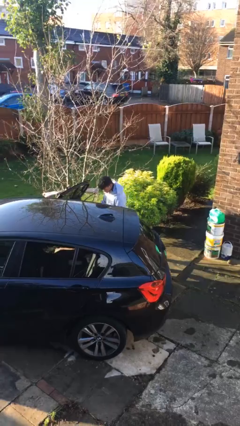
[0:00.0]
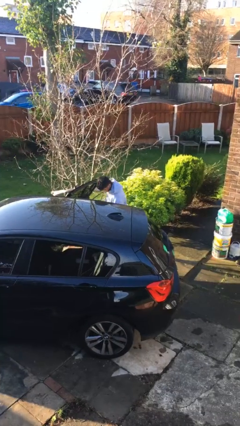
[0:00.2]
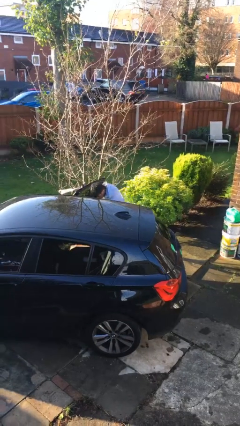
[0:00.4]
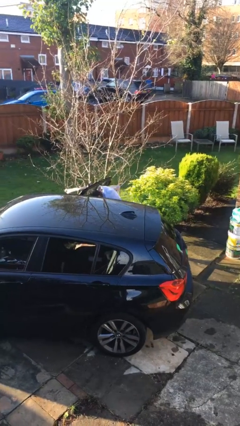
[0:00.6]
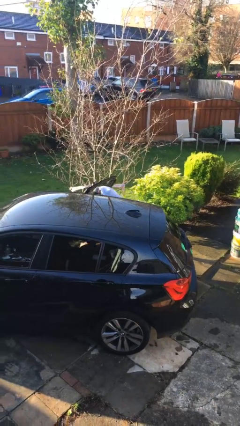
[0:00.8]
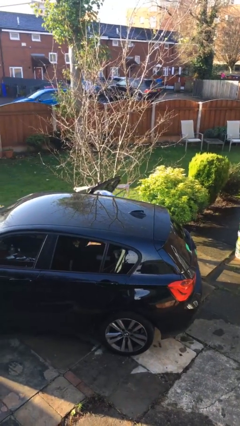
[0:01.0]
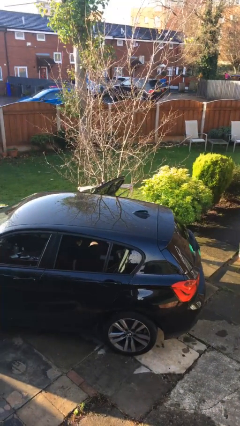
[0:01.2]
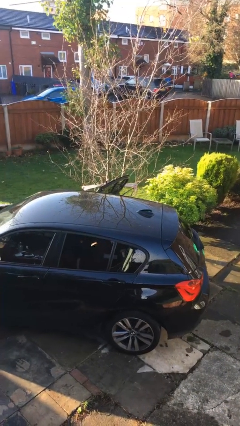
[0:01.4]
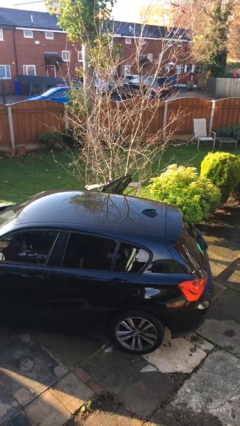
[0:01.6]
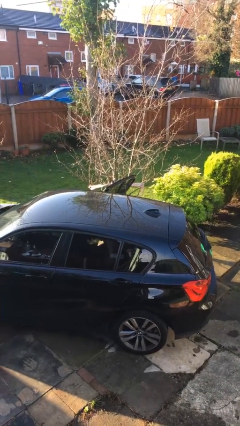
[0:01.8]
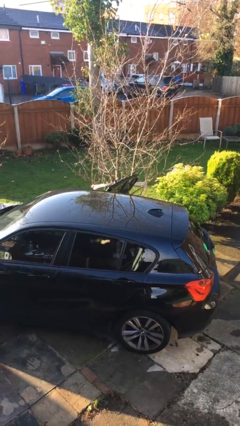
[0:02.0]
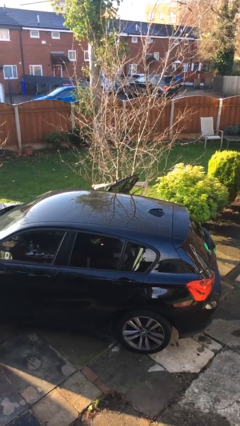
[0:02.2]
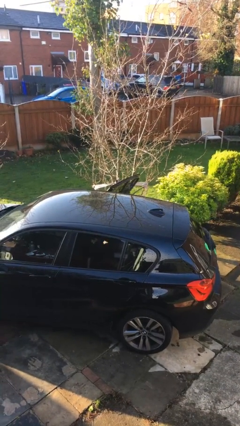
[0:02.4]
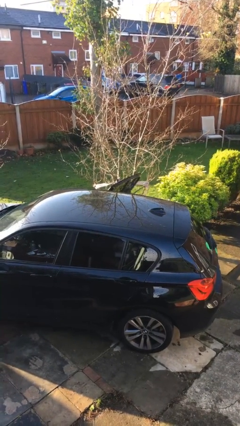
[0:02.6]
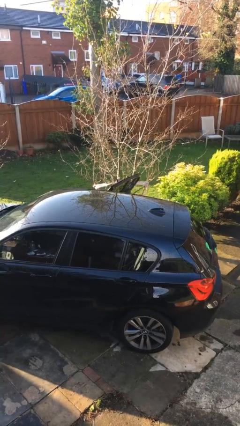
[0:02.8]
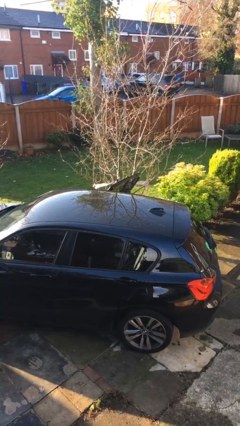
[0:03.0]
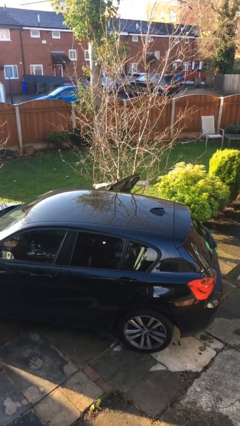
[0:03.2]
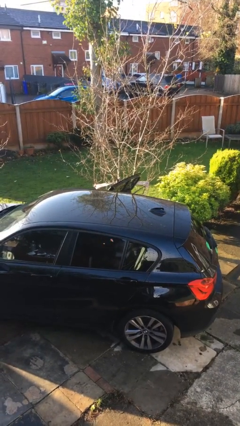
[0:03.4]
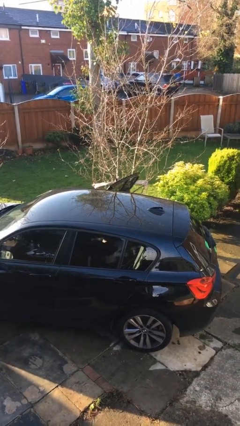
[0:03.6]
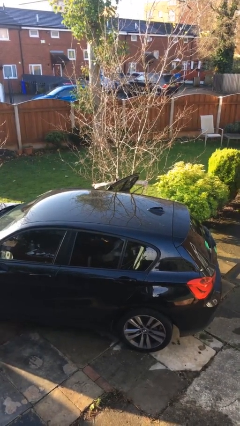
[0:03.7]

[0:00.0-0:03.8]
person enters car

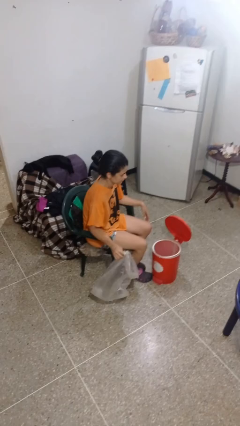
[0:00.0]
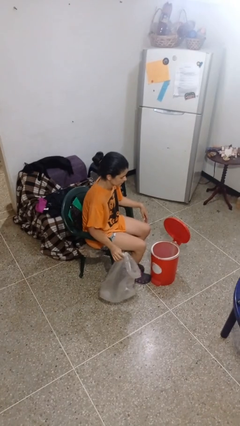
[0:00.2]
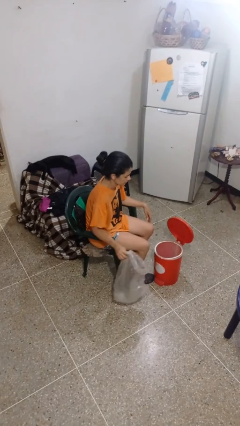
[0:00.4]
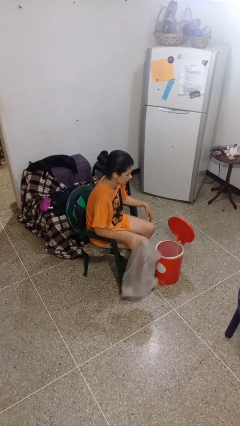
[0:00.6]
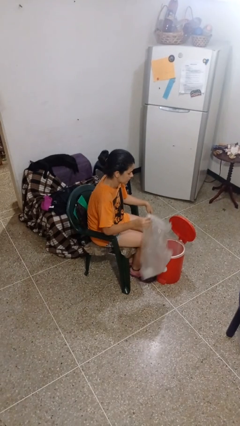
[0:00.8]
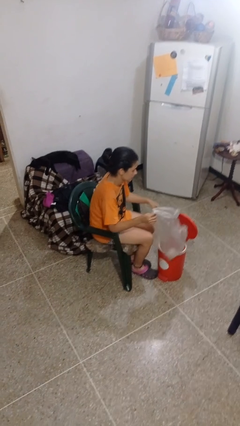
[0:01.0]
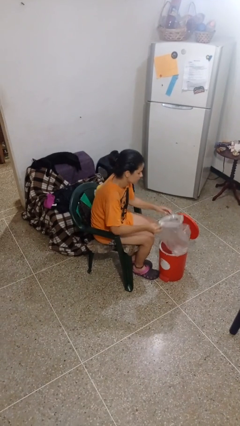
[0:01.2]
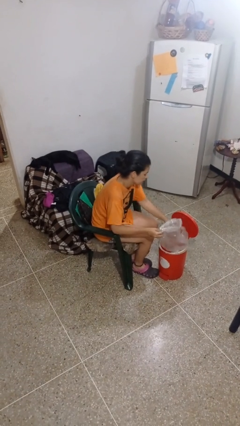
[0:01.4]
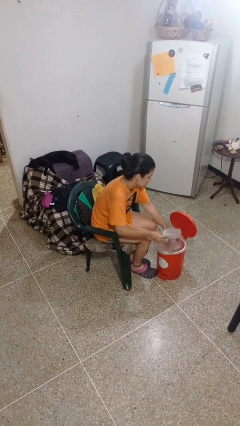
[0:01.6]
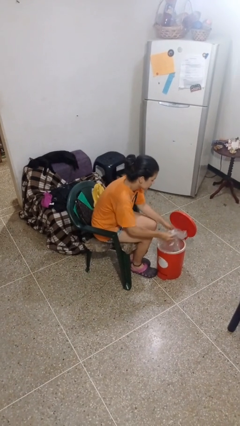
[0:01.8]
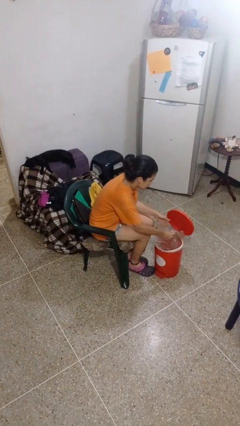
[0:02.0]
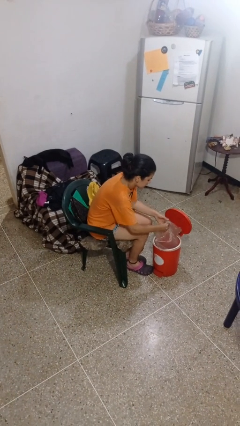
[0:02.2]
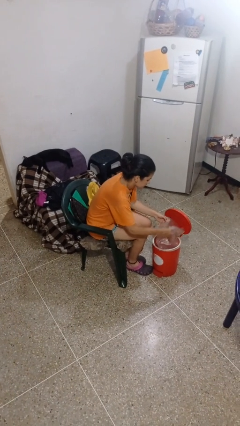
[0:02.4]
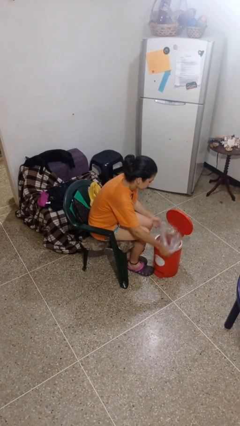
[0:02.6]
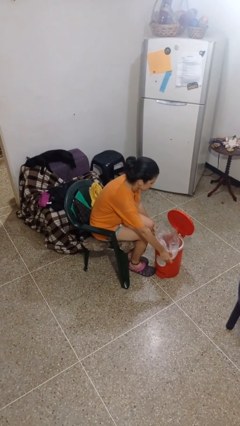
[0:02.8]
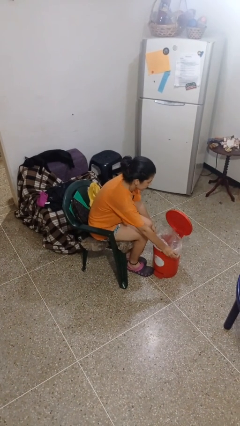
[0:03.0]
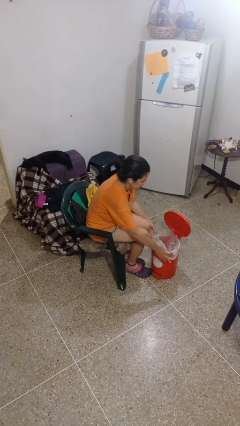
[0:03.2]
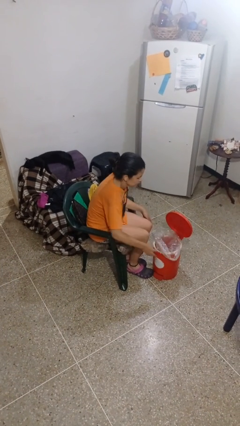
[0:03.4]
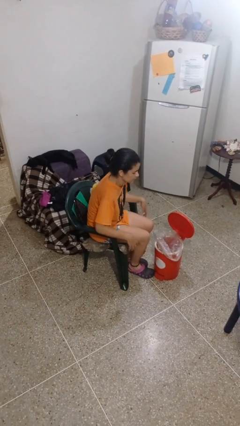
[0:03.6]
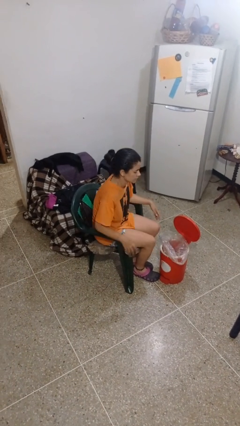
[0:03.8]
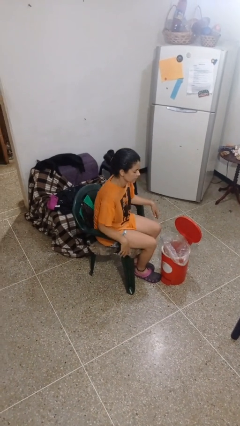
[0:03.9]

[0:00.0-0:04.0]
person inserts trashbag into trashcan

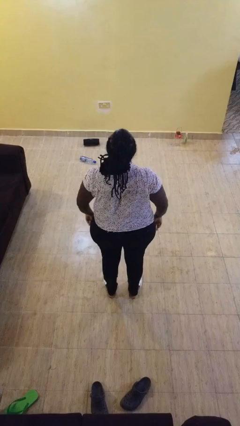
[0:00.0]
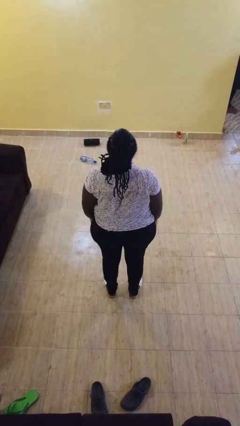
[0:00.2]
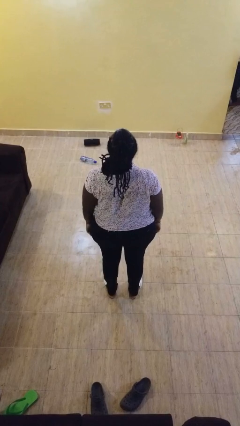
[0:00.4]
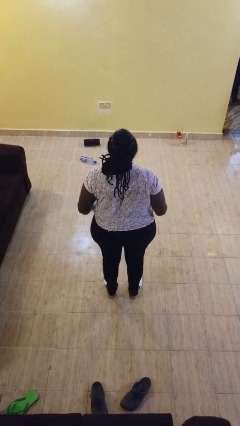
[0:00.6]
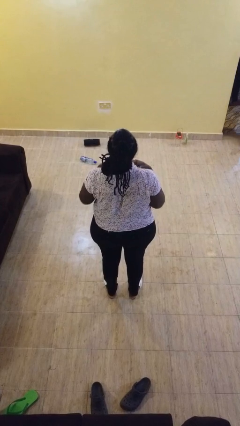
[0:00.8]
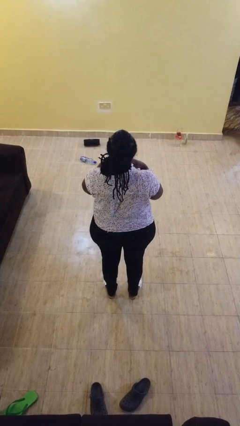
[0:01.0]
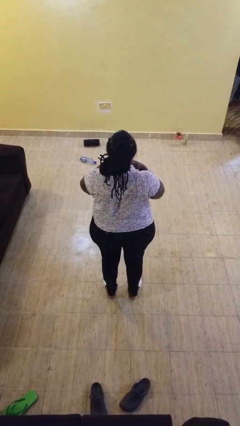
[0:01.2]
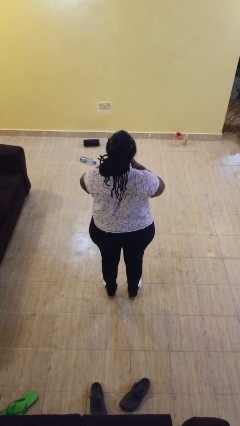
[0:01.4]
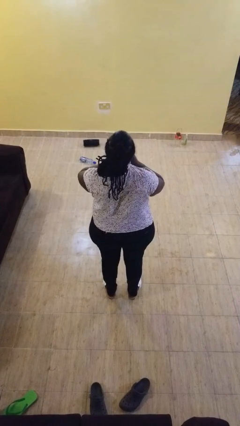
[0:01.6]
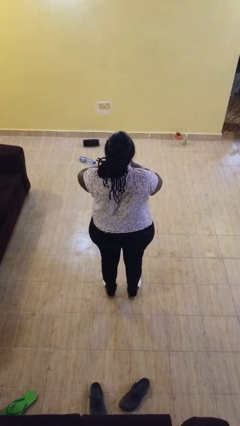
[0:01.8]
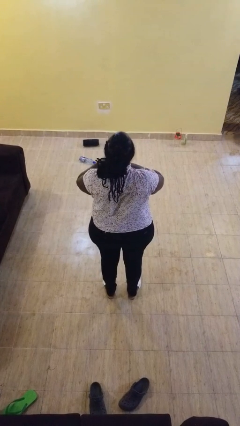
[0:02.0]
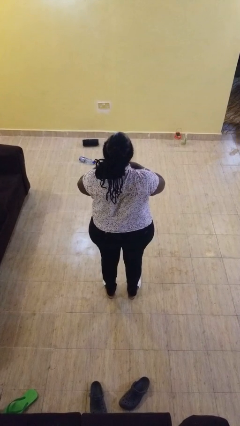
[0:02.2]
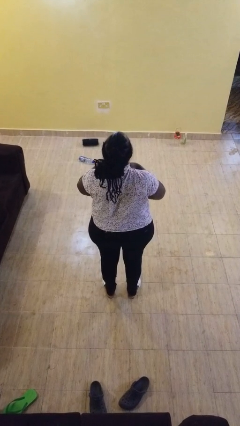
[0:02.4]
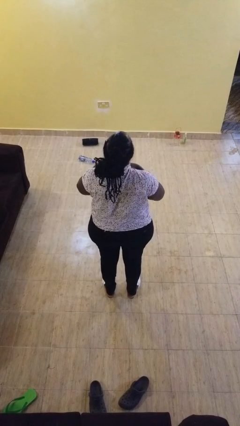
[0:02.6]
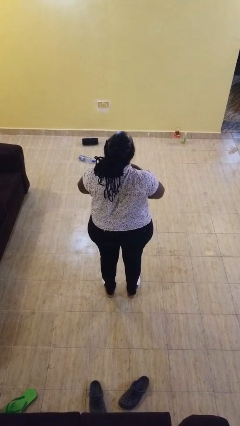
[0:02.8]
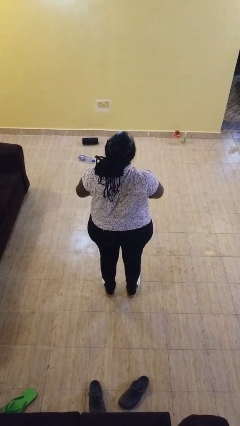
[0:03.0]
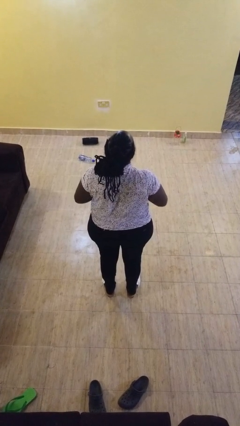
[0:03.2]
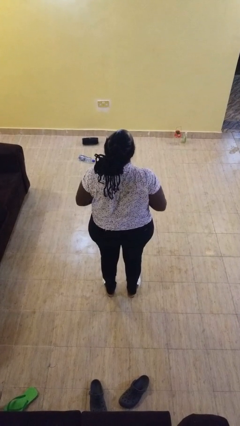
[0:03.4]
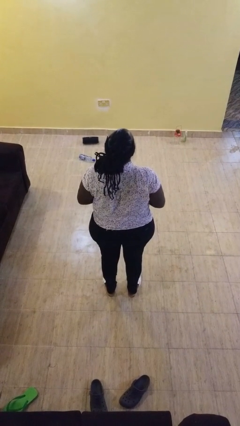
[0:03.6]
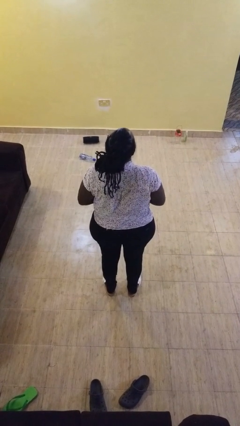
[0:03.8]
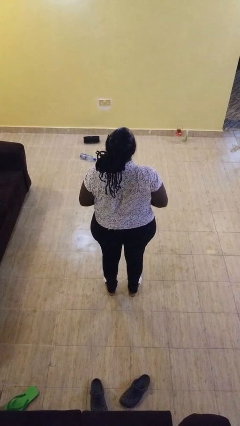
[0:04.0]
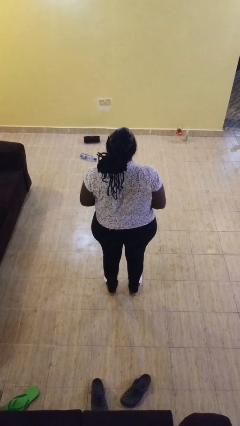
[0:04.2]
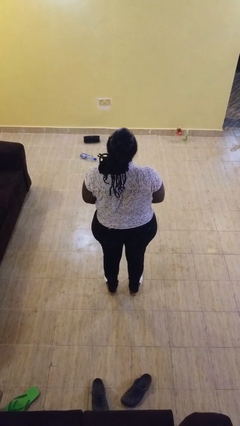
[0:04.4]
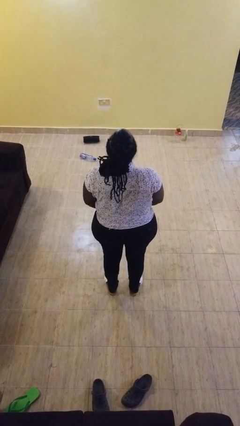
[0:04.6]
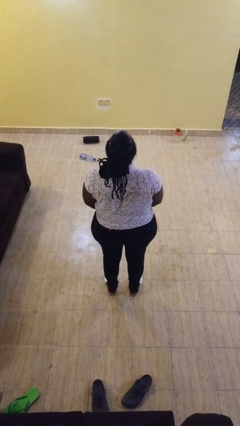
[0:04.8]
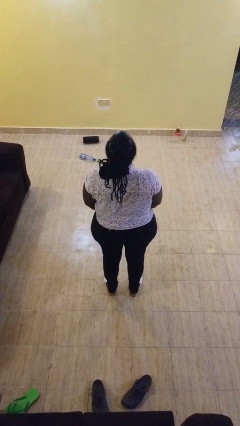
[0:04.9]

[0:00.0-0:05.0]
person buttons shirt

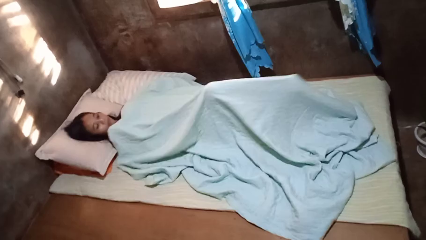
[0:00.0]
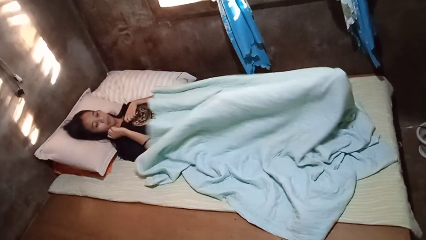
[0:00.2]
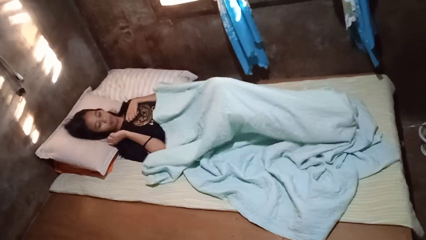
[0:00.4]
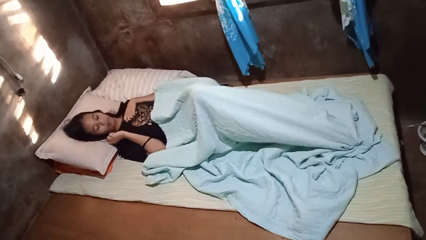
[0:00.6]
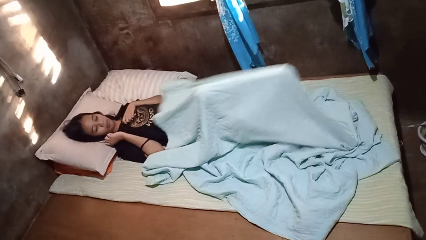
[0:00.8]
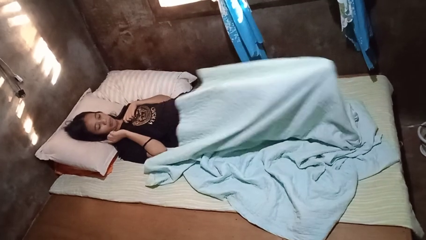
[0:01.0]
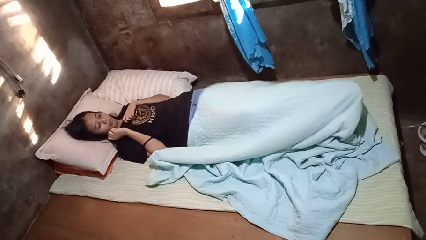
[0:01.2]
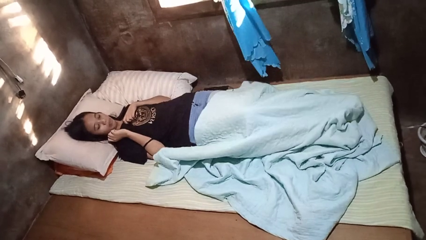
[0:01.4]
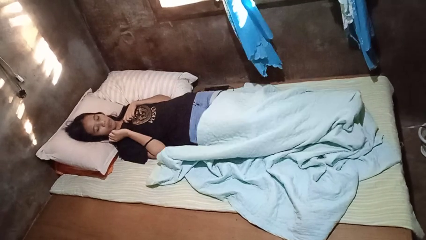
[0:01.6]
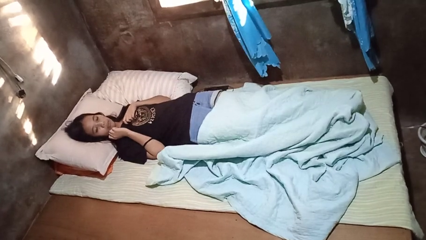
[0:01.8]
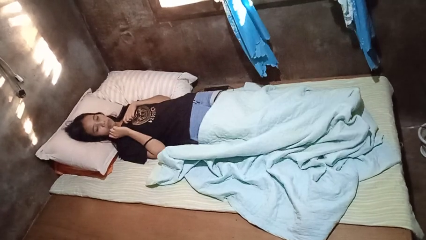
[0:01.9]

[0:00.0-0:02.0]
person uncovers with bedsheets

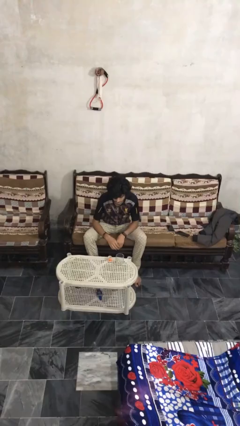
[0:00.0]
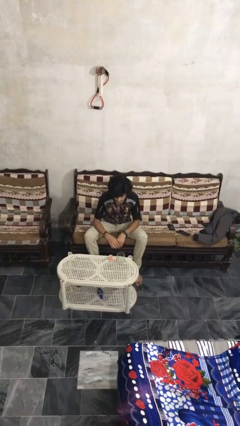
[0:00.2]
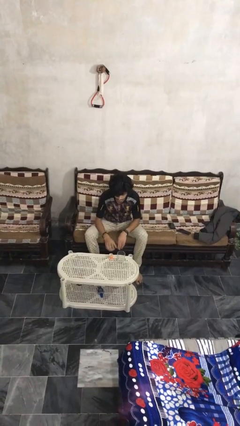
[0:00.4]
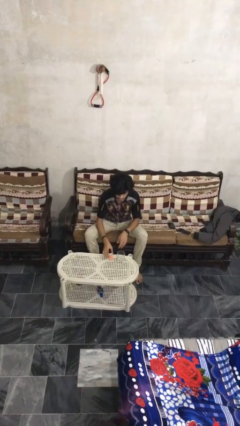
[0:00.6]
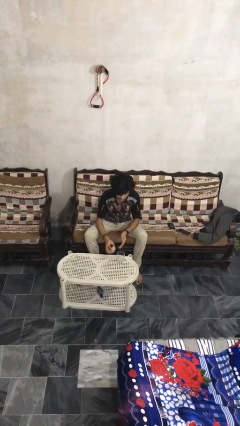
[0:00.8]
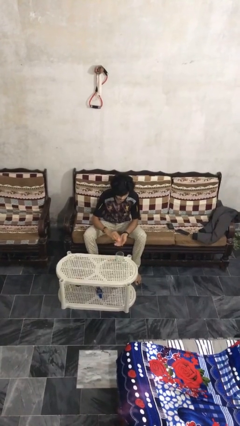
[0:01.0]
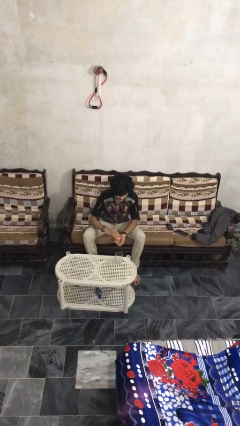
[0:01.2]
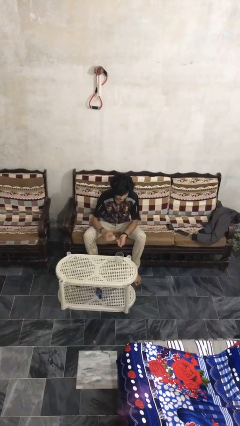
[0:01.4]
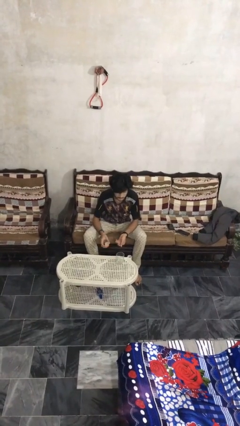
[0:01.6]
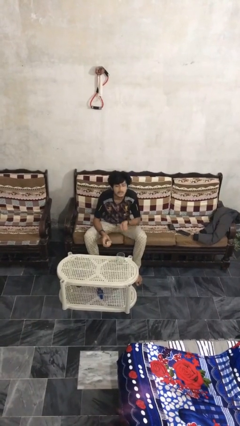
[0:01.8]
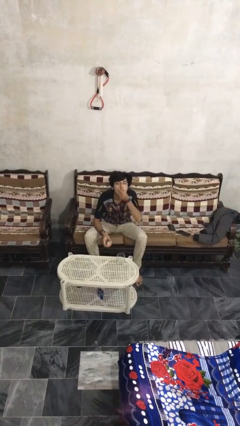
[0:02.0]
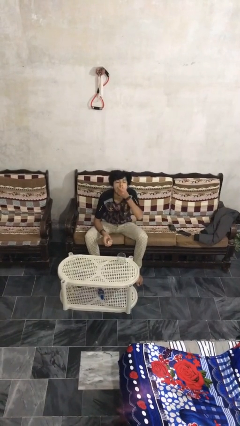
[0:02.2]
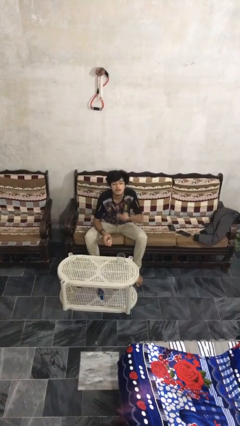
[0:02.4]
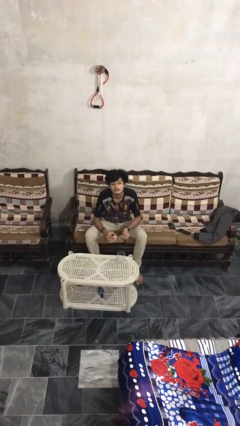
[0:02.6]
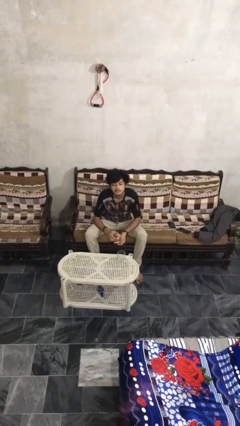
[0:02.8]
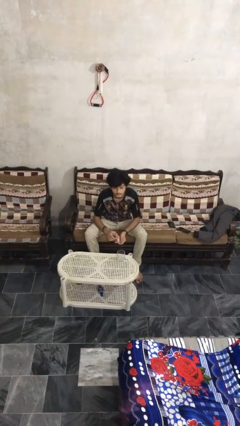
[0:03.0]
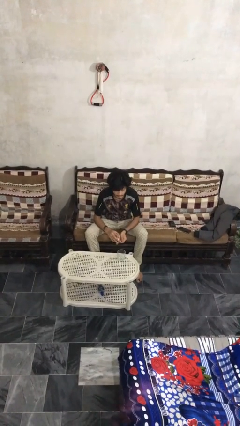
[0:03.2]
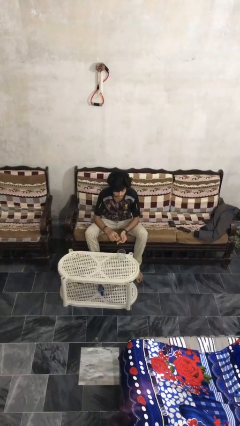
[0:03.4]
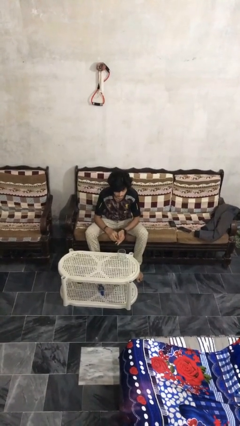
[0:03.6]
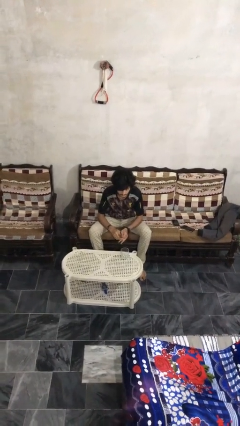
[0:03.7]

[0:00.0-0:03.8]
person takes medicine pills
